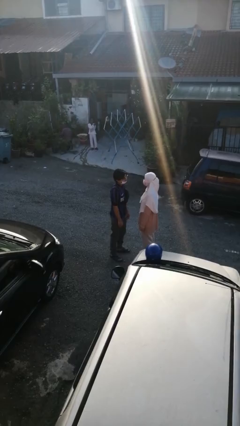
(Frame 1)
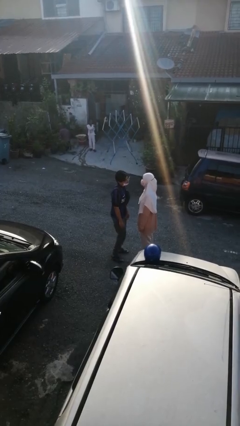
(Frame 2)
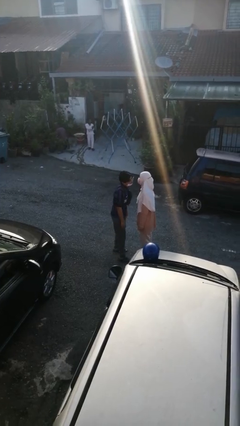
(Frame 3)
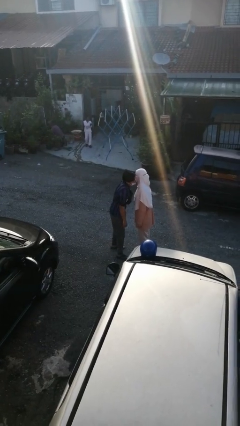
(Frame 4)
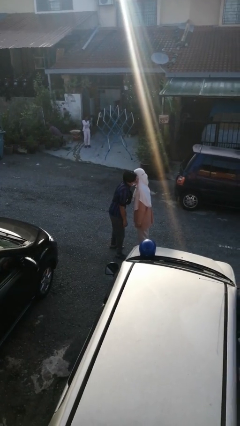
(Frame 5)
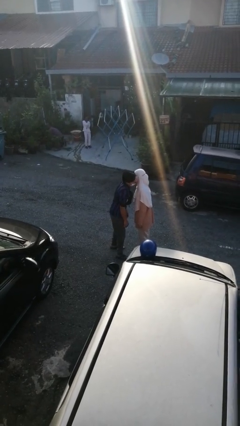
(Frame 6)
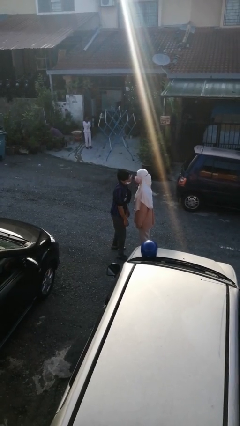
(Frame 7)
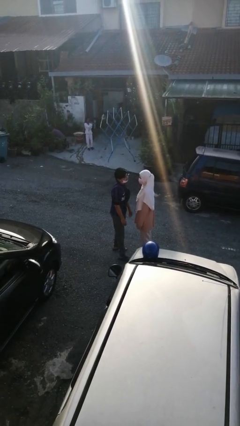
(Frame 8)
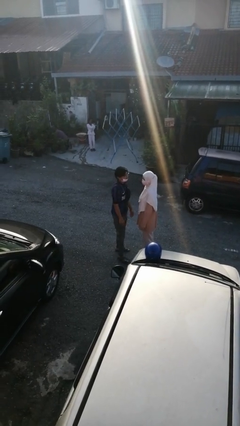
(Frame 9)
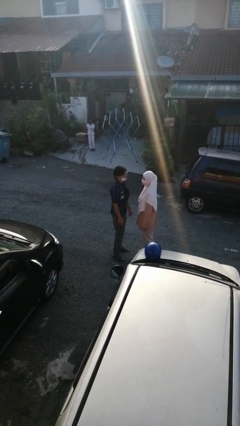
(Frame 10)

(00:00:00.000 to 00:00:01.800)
person kisses cheek of person

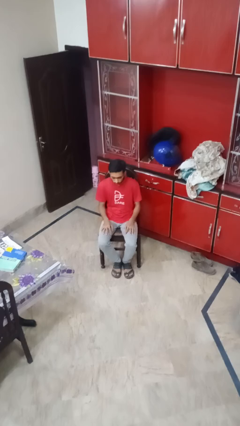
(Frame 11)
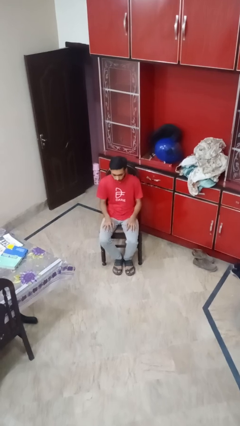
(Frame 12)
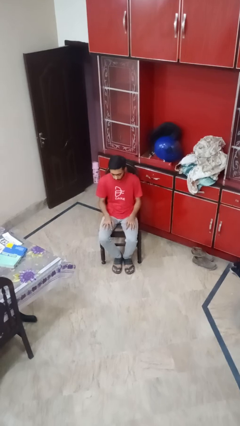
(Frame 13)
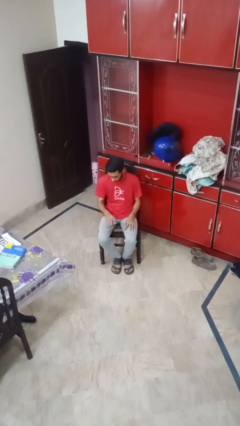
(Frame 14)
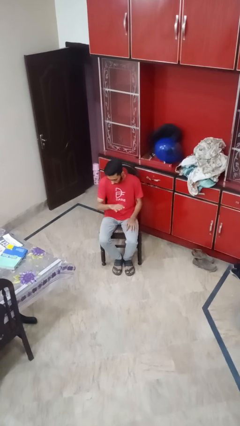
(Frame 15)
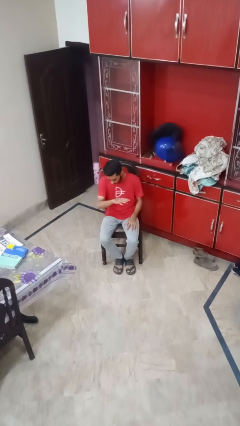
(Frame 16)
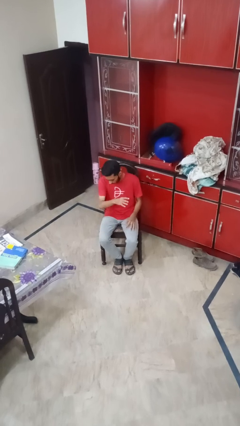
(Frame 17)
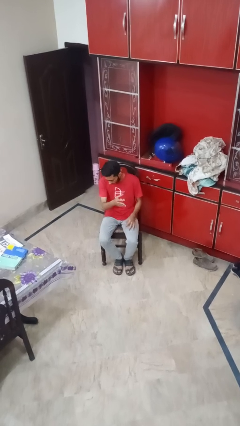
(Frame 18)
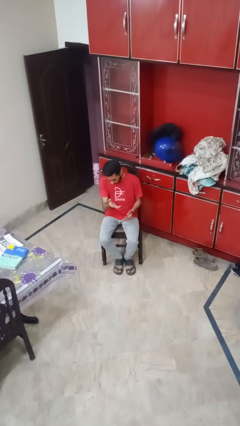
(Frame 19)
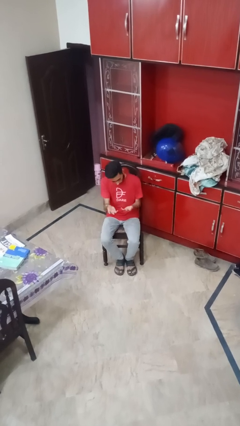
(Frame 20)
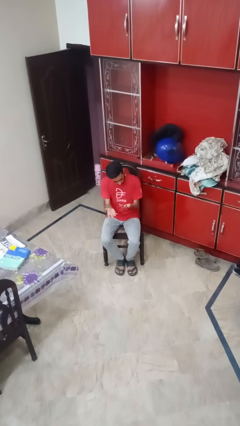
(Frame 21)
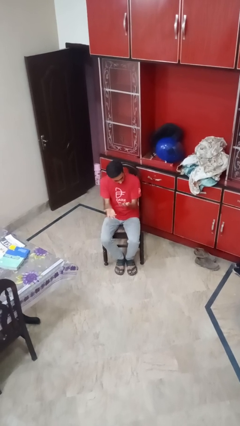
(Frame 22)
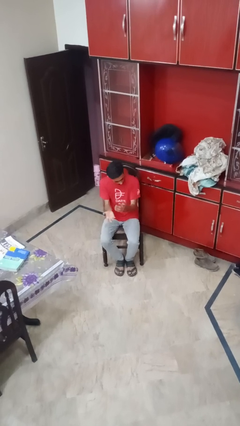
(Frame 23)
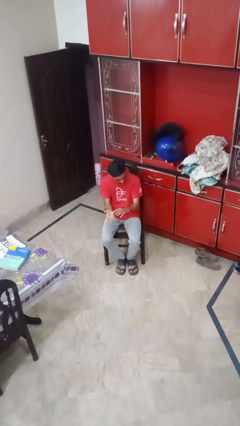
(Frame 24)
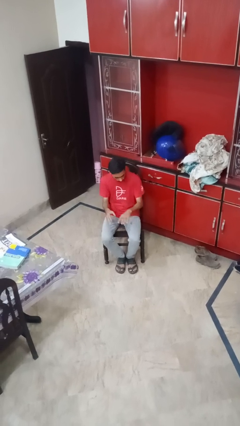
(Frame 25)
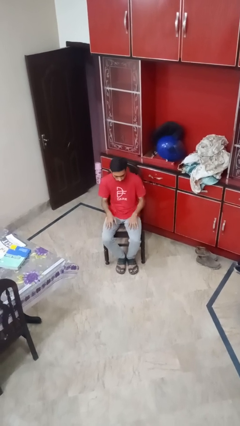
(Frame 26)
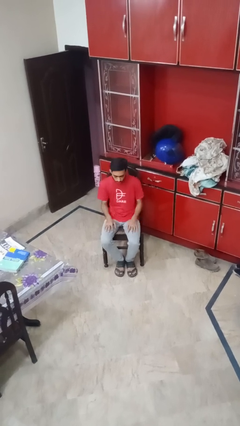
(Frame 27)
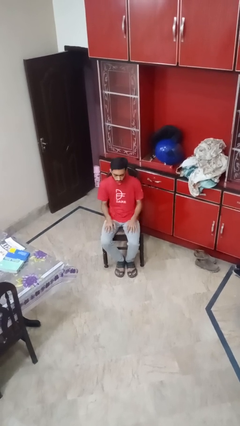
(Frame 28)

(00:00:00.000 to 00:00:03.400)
person looks at hands in lap

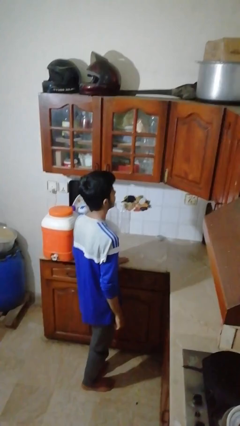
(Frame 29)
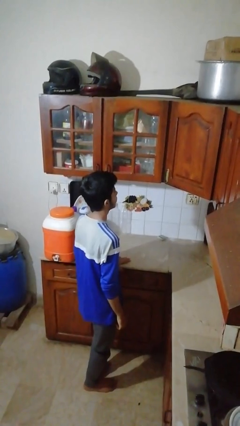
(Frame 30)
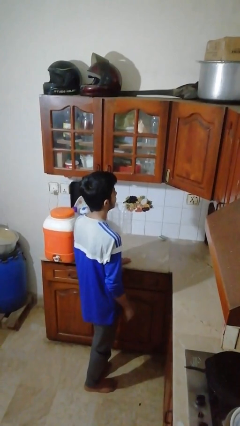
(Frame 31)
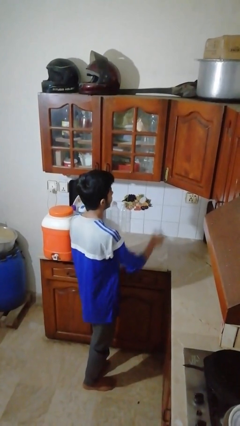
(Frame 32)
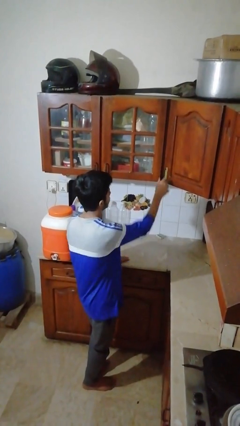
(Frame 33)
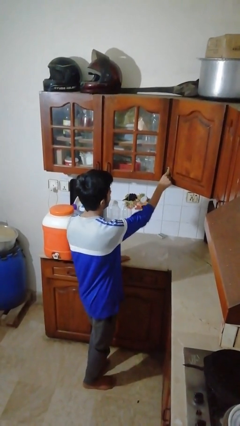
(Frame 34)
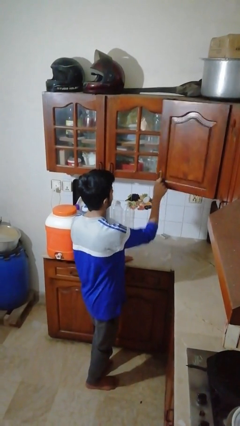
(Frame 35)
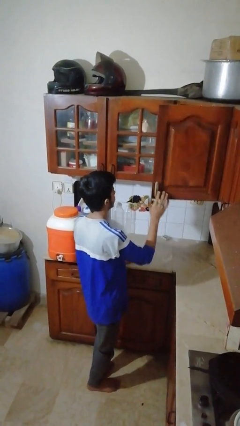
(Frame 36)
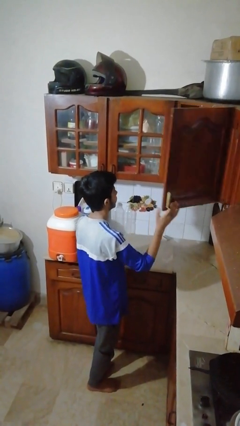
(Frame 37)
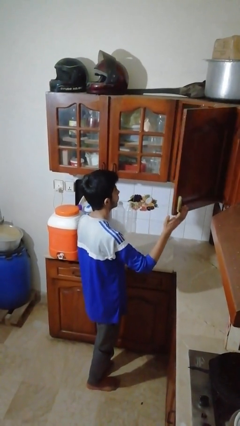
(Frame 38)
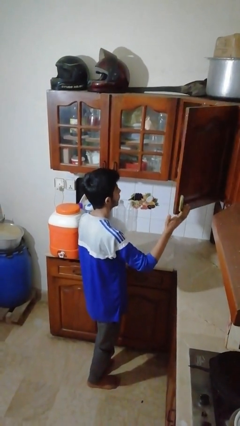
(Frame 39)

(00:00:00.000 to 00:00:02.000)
person opens cabinet

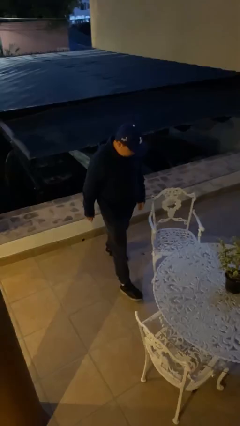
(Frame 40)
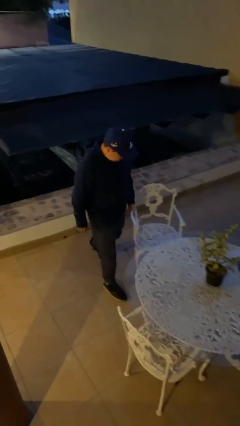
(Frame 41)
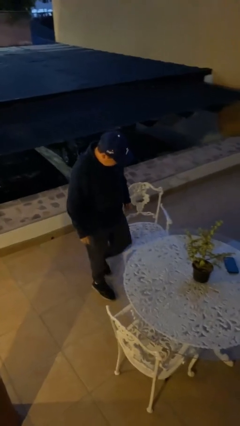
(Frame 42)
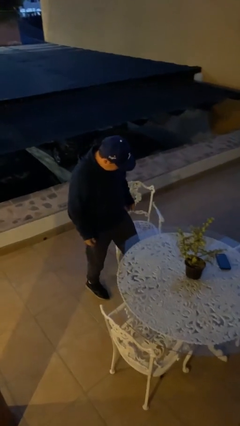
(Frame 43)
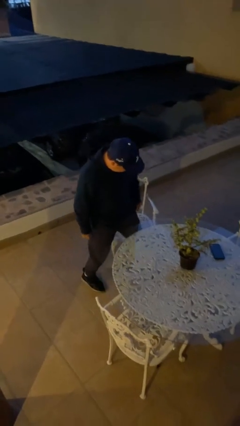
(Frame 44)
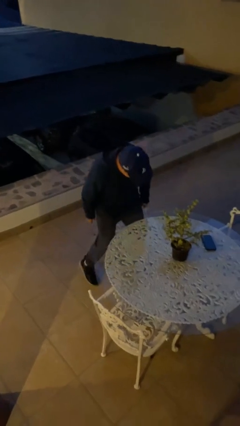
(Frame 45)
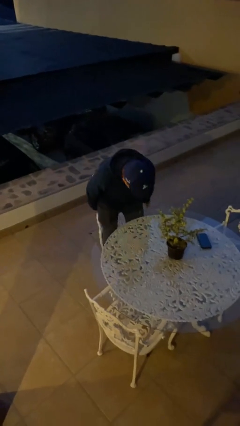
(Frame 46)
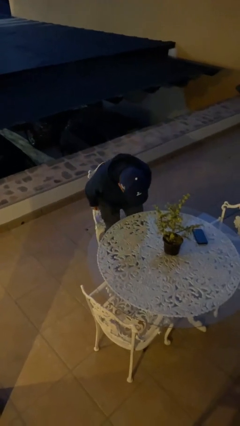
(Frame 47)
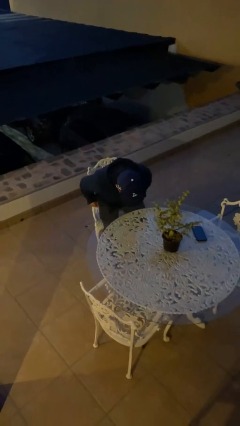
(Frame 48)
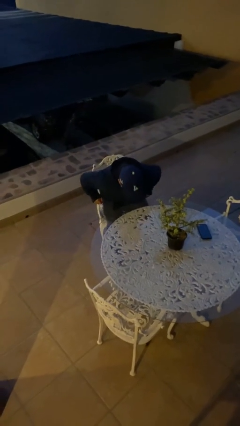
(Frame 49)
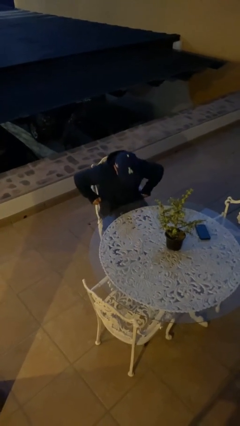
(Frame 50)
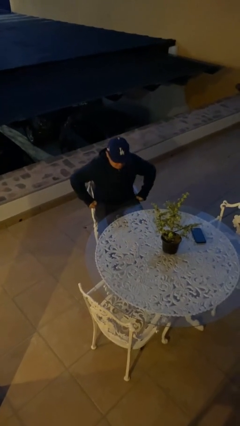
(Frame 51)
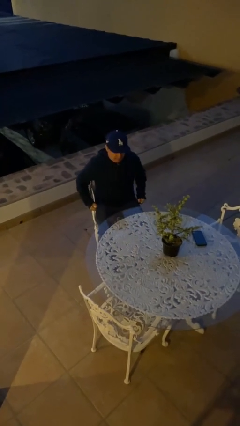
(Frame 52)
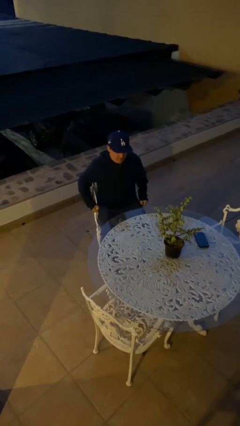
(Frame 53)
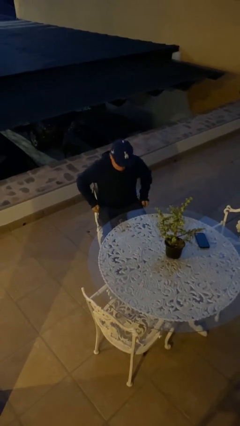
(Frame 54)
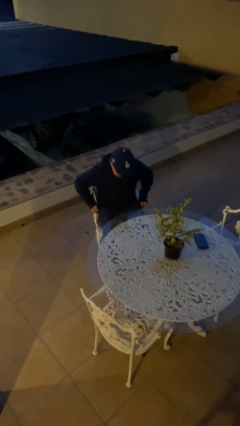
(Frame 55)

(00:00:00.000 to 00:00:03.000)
person sits down

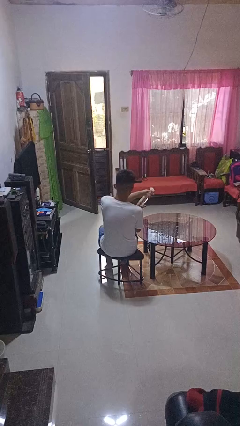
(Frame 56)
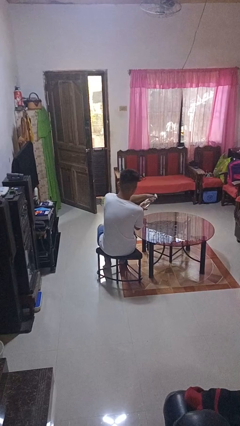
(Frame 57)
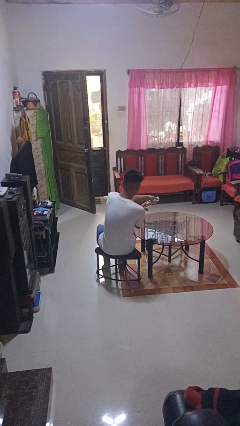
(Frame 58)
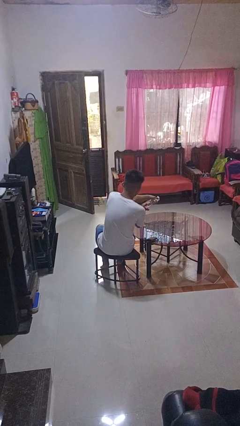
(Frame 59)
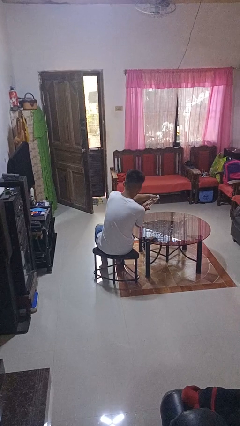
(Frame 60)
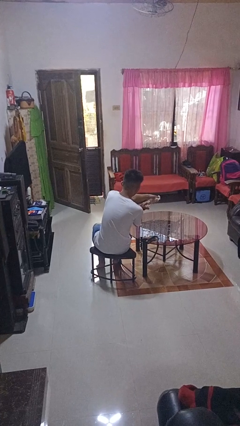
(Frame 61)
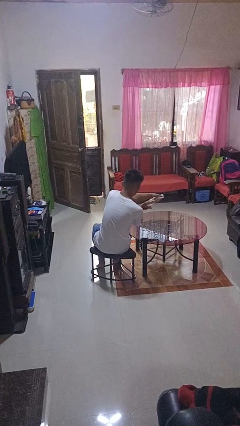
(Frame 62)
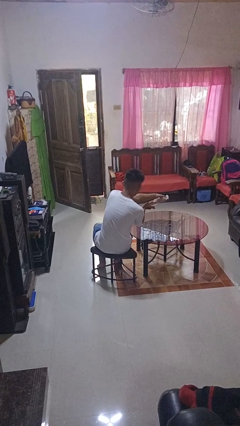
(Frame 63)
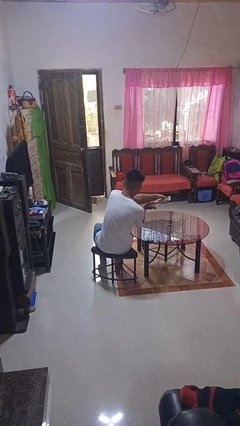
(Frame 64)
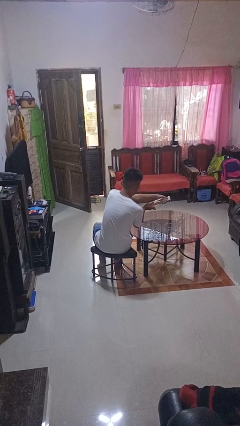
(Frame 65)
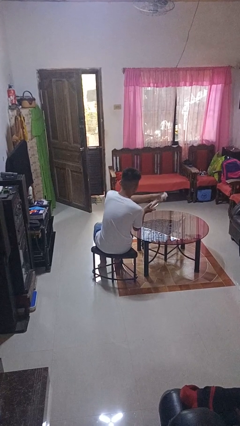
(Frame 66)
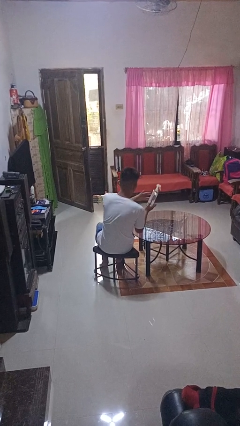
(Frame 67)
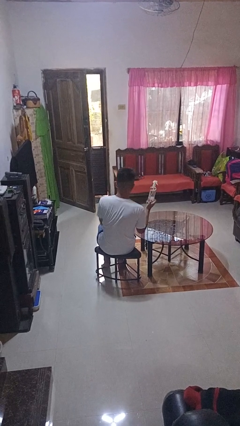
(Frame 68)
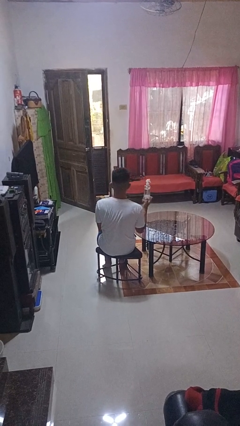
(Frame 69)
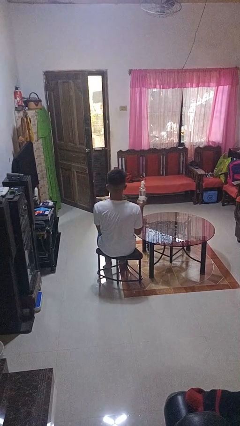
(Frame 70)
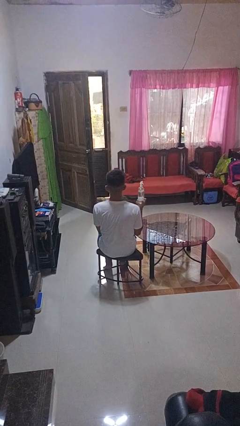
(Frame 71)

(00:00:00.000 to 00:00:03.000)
person sprays from bottle

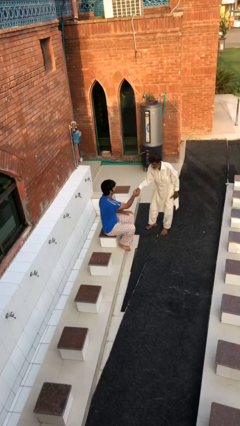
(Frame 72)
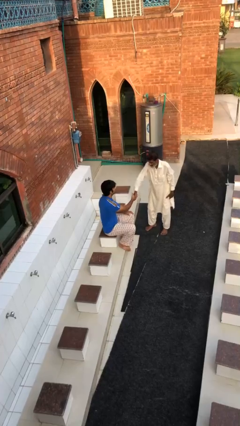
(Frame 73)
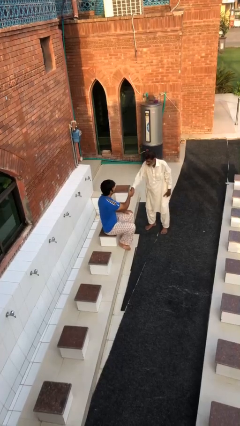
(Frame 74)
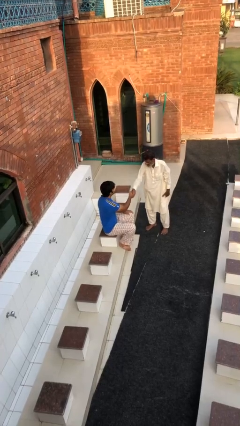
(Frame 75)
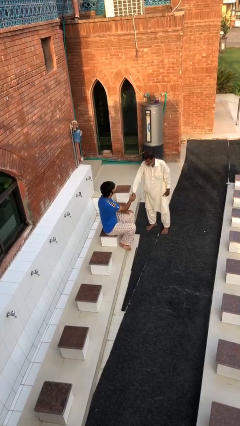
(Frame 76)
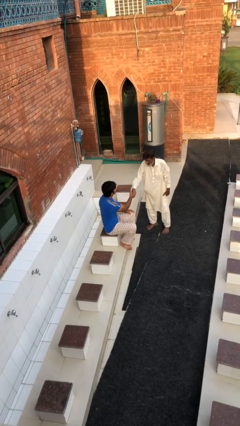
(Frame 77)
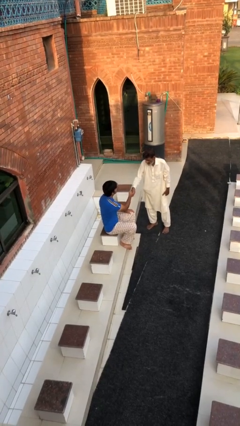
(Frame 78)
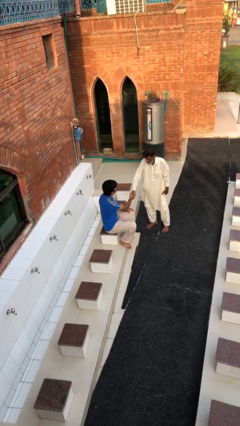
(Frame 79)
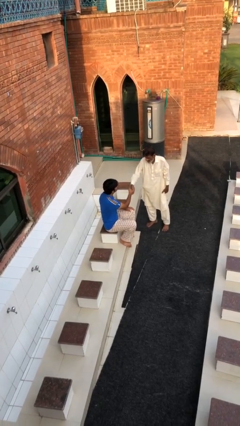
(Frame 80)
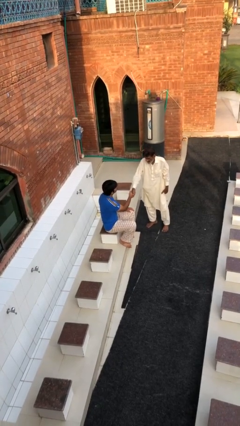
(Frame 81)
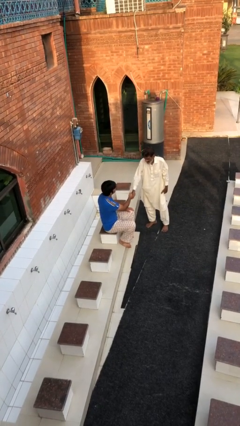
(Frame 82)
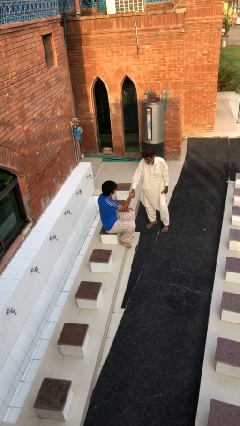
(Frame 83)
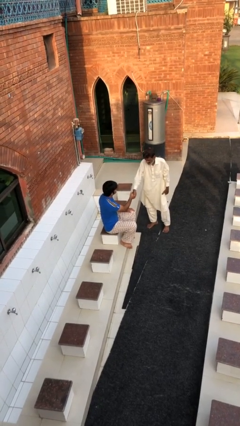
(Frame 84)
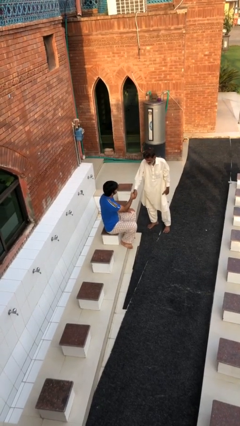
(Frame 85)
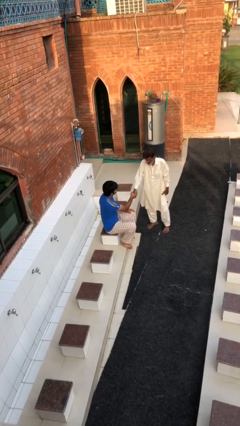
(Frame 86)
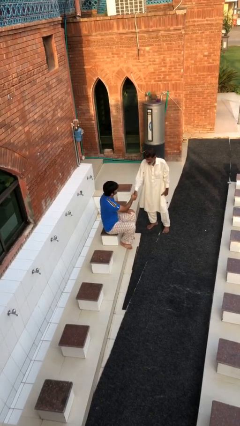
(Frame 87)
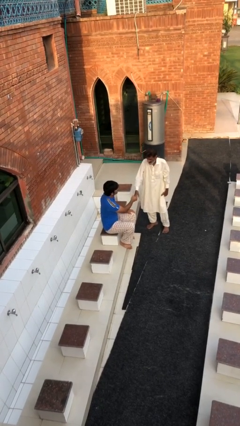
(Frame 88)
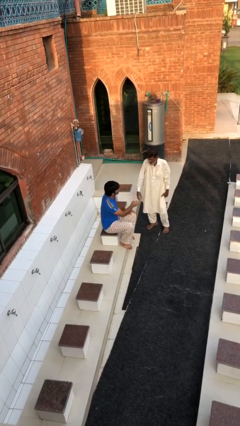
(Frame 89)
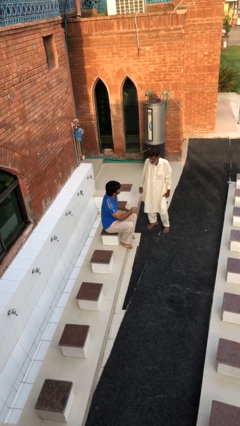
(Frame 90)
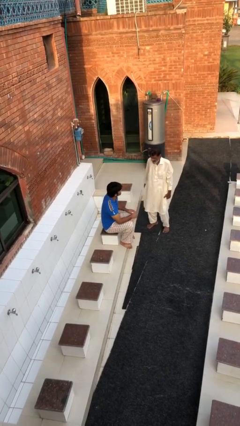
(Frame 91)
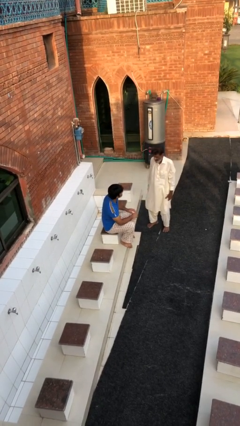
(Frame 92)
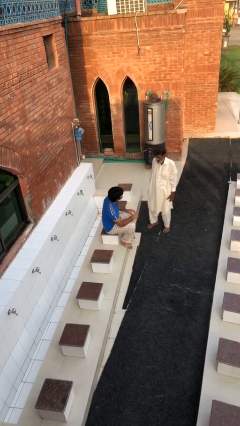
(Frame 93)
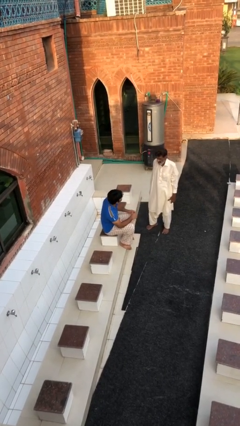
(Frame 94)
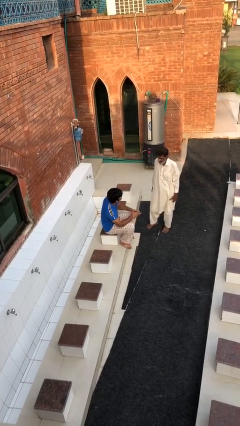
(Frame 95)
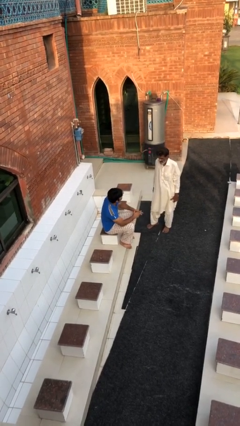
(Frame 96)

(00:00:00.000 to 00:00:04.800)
person shakes hand
